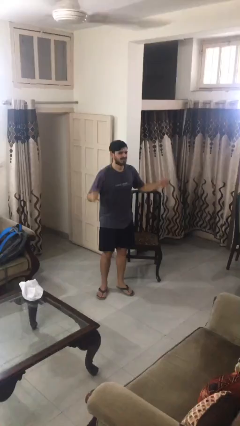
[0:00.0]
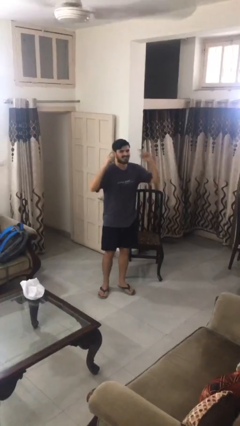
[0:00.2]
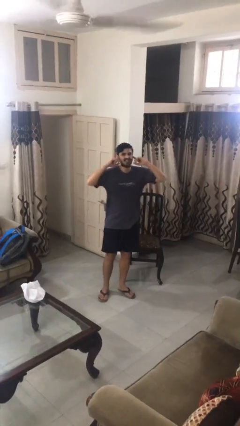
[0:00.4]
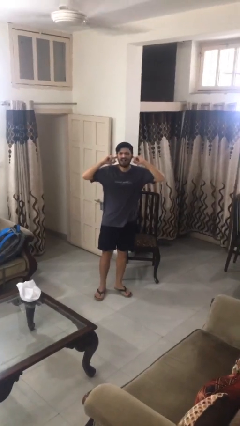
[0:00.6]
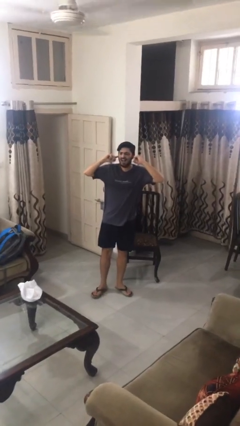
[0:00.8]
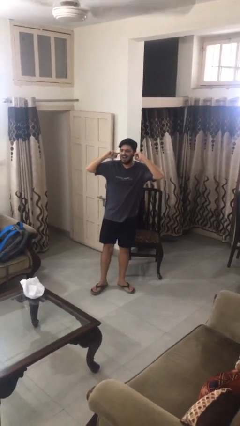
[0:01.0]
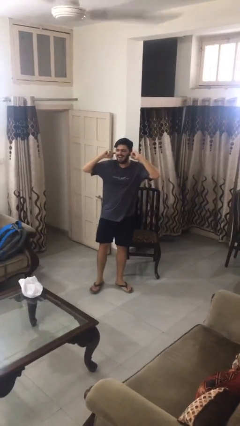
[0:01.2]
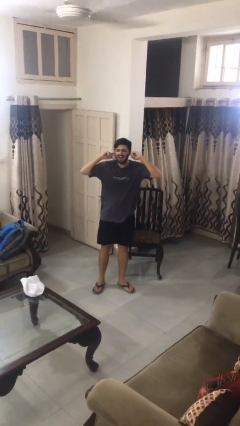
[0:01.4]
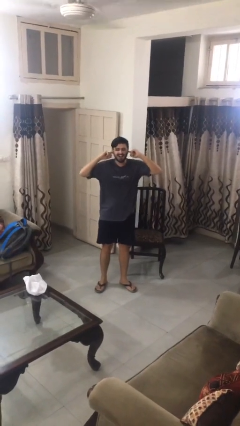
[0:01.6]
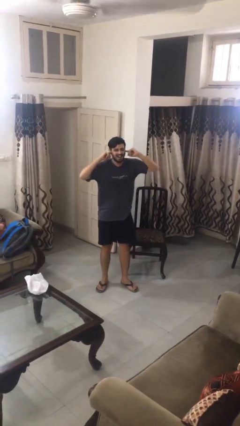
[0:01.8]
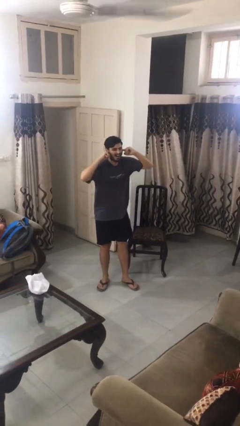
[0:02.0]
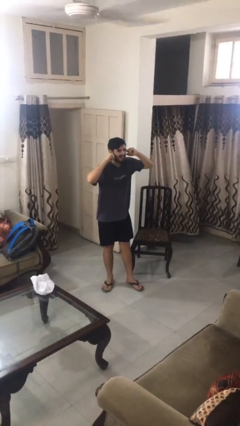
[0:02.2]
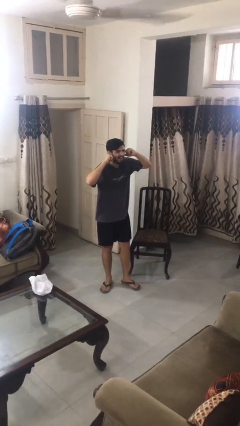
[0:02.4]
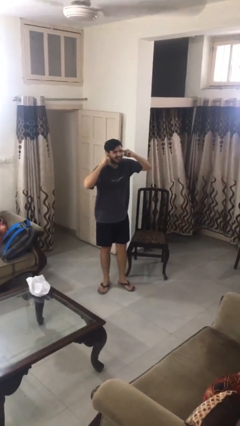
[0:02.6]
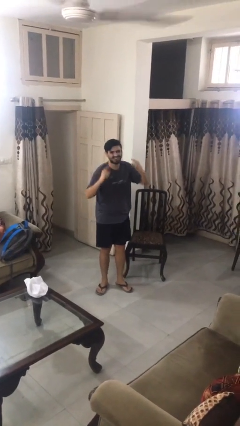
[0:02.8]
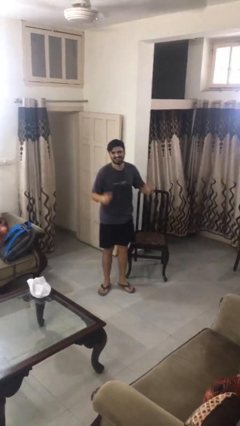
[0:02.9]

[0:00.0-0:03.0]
person puts fingers in ear

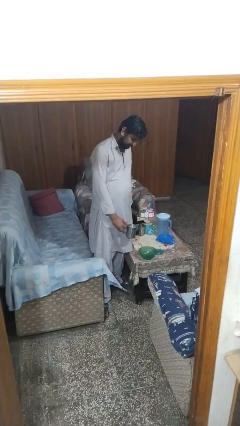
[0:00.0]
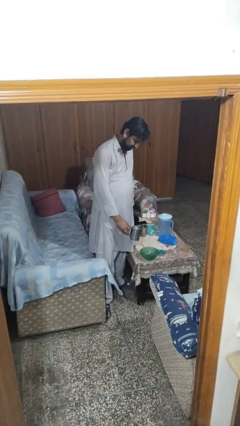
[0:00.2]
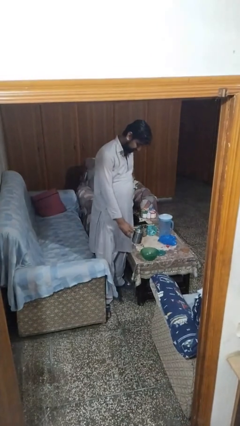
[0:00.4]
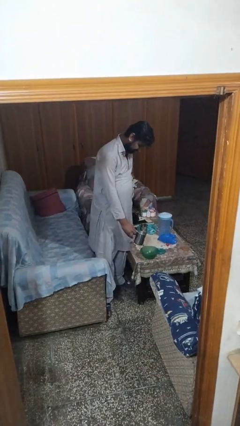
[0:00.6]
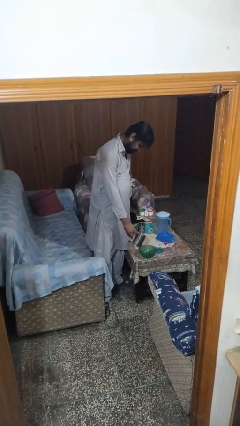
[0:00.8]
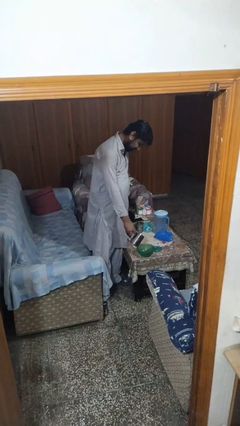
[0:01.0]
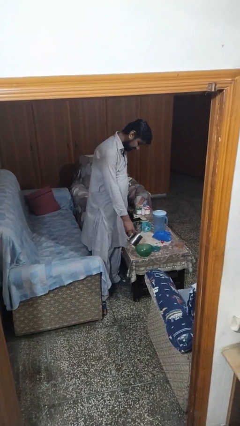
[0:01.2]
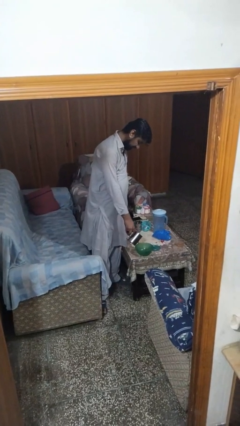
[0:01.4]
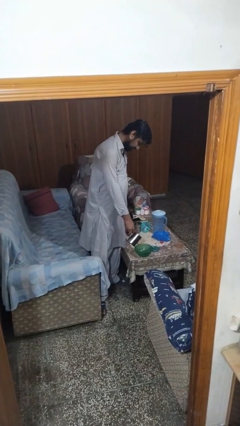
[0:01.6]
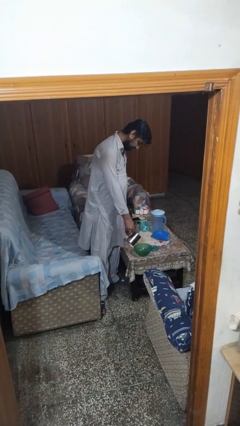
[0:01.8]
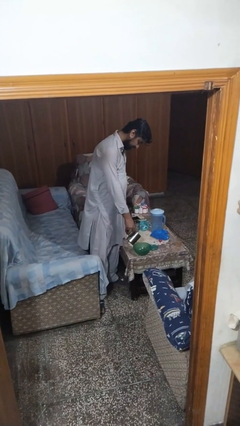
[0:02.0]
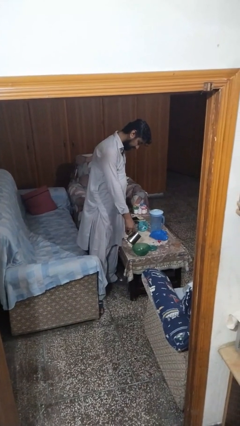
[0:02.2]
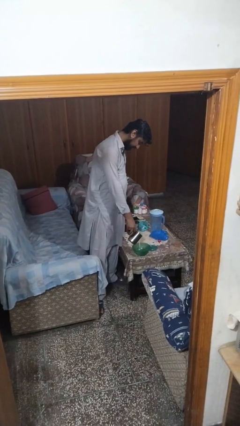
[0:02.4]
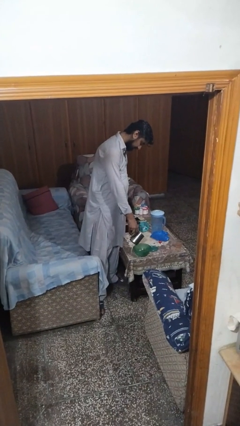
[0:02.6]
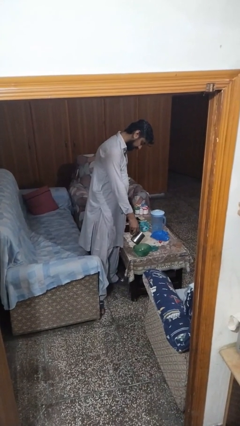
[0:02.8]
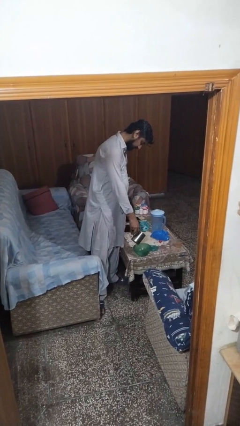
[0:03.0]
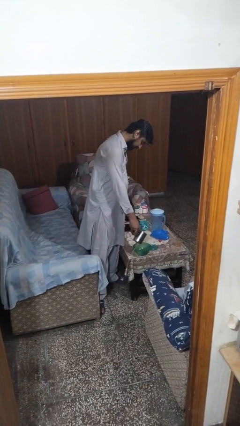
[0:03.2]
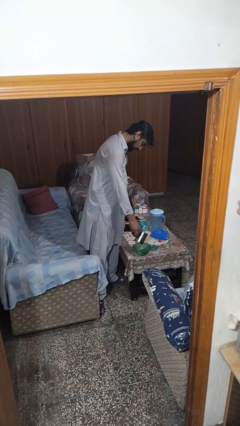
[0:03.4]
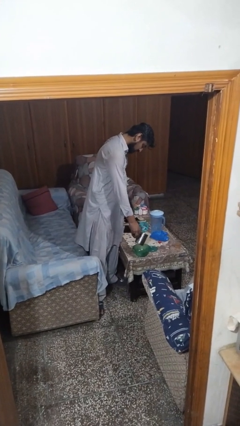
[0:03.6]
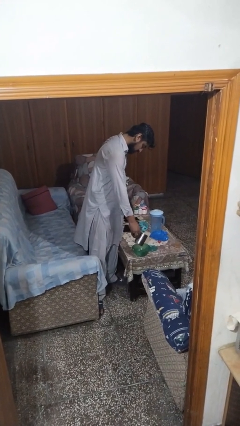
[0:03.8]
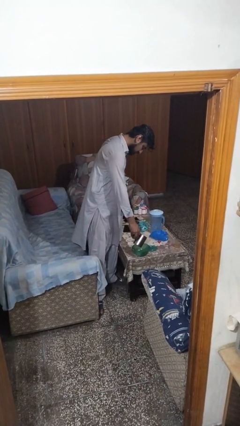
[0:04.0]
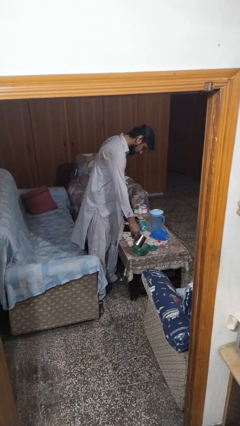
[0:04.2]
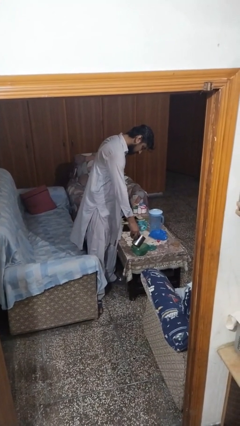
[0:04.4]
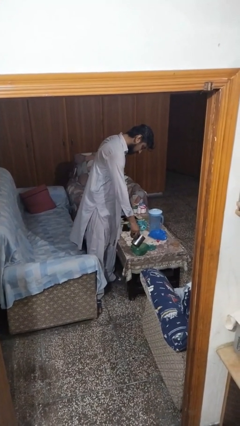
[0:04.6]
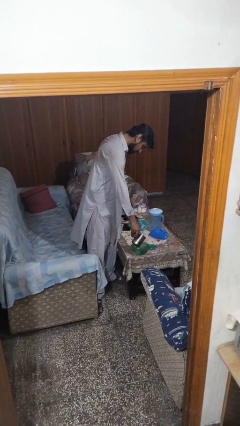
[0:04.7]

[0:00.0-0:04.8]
person pours into bowl

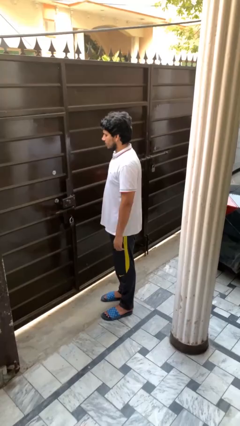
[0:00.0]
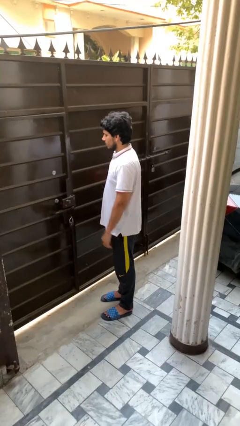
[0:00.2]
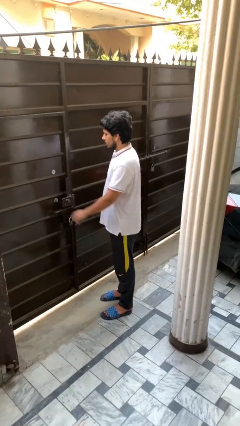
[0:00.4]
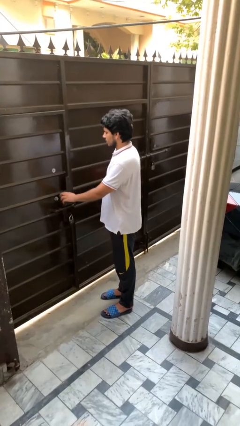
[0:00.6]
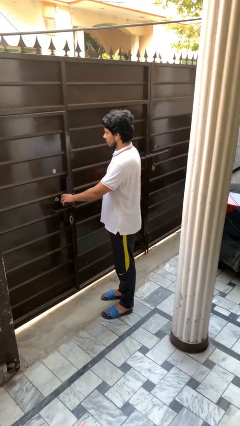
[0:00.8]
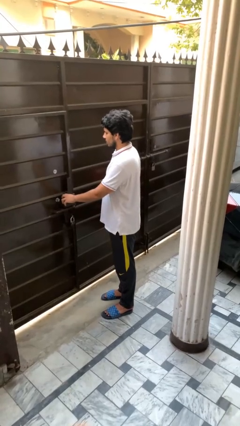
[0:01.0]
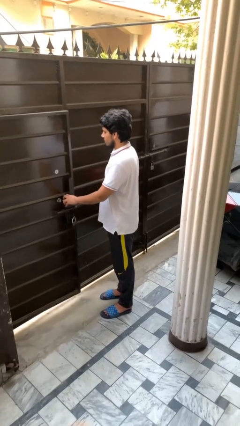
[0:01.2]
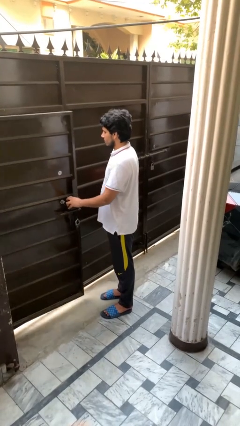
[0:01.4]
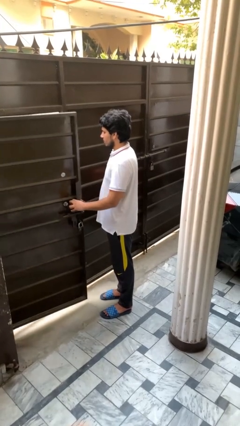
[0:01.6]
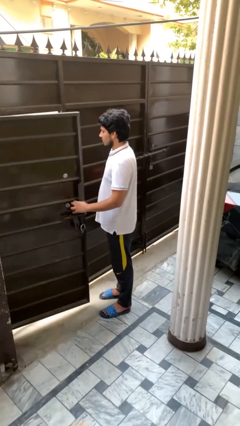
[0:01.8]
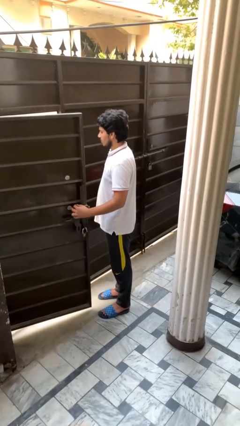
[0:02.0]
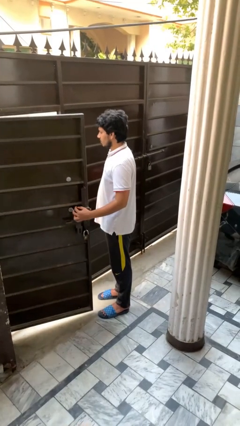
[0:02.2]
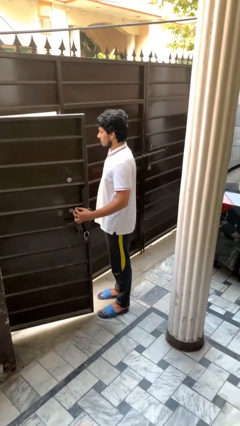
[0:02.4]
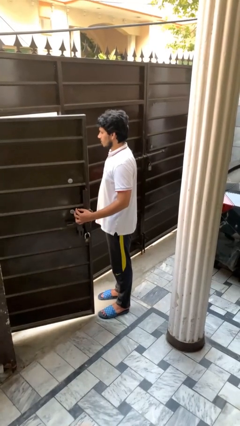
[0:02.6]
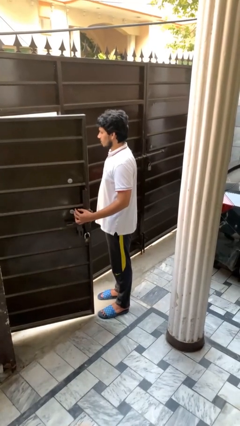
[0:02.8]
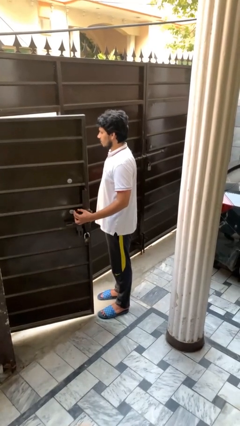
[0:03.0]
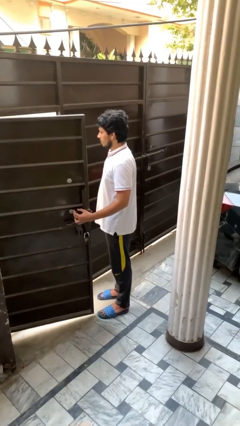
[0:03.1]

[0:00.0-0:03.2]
person opens gate

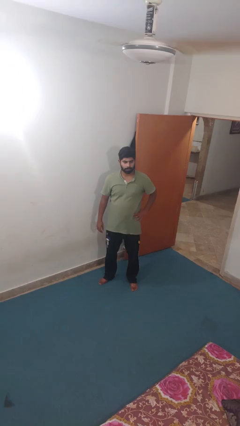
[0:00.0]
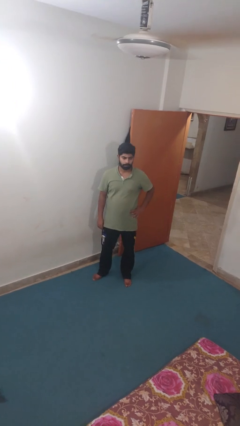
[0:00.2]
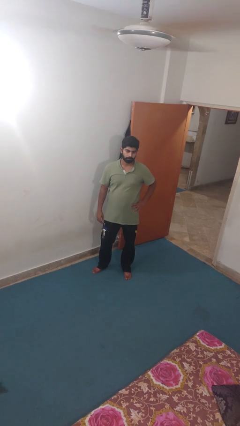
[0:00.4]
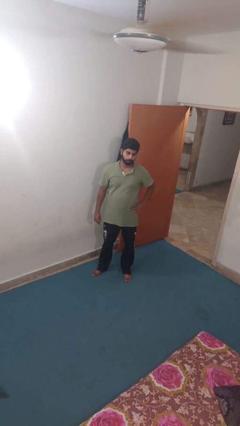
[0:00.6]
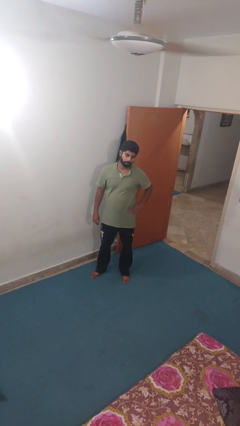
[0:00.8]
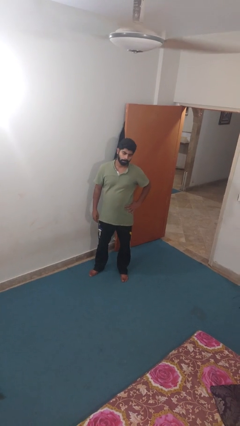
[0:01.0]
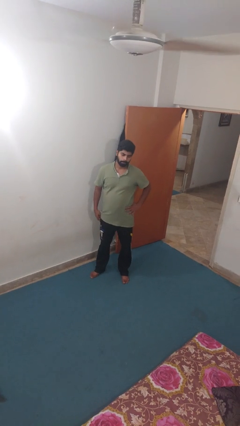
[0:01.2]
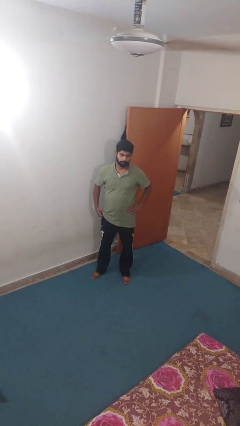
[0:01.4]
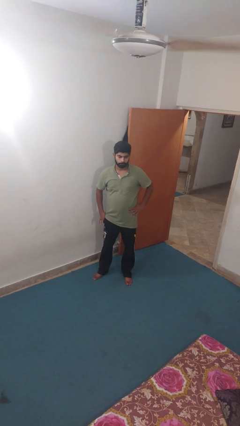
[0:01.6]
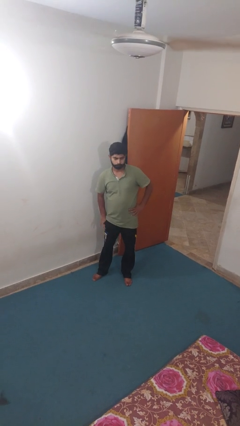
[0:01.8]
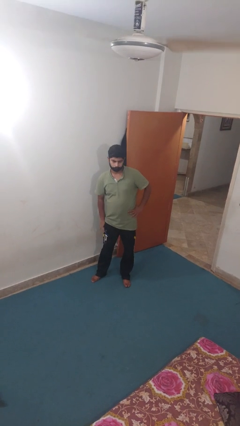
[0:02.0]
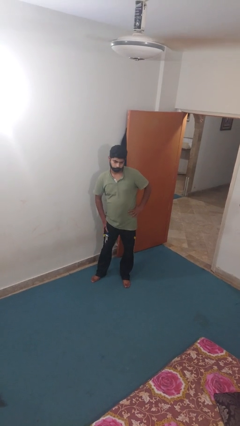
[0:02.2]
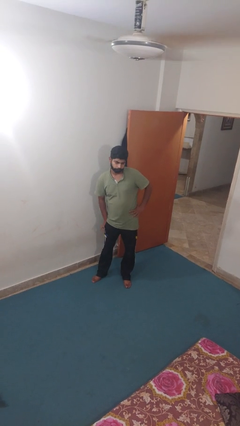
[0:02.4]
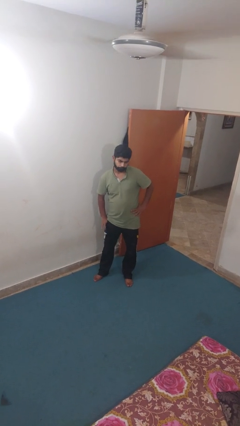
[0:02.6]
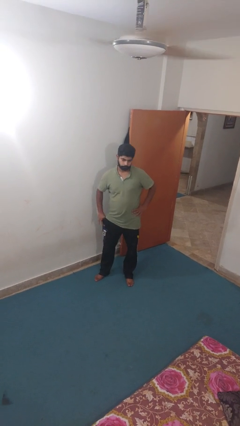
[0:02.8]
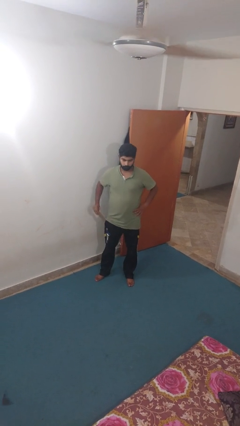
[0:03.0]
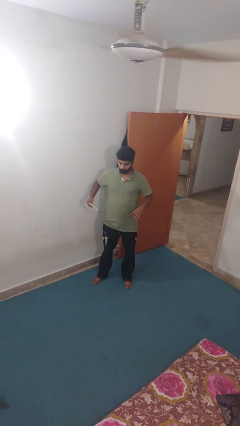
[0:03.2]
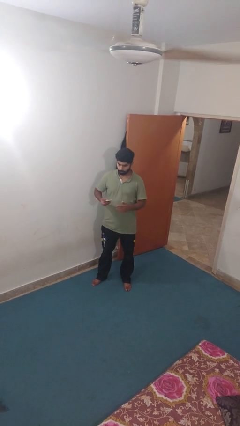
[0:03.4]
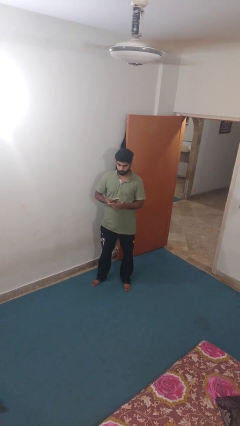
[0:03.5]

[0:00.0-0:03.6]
person takes phone from pocket

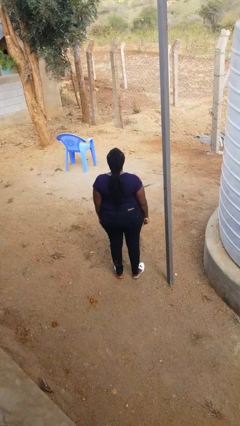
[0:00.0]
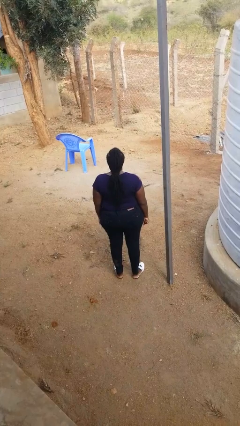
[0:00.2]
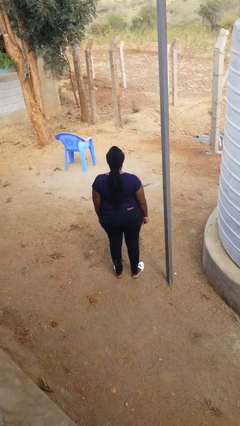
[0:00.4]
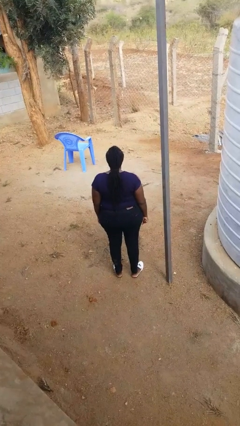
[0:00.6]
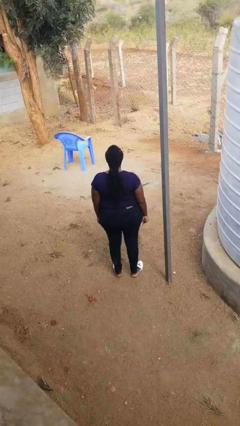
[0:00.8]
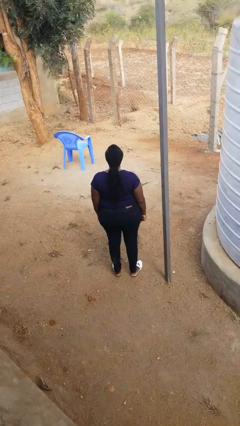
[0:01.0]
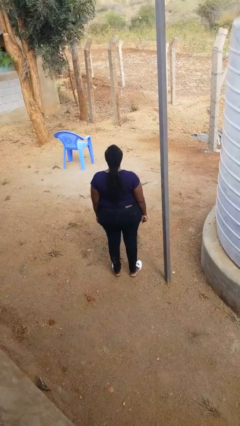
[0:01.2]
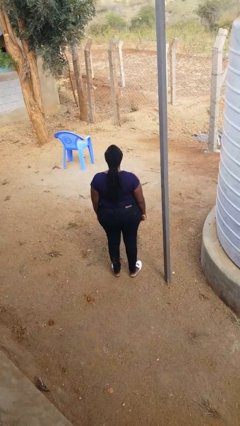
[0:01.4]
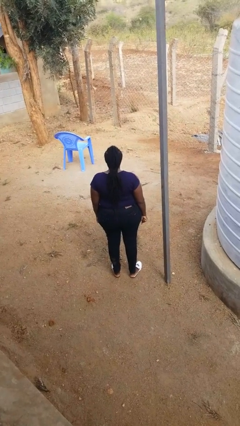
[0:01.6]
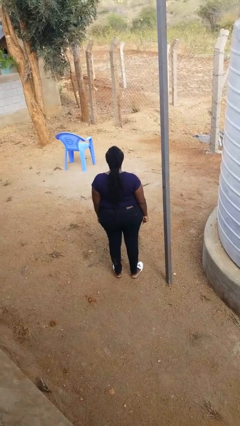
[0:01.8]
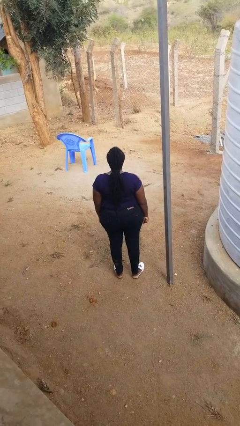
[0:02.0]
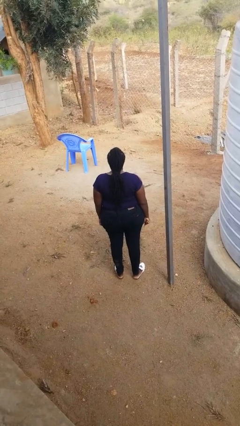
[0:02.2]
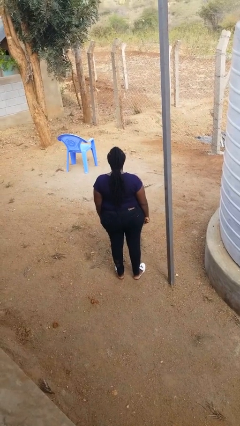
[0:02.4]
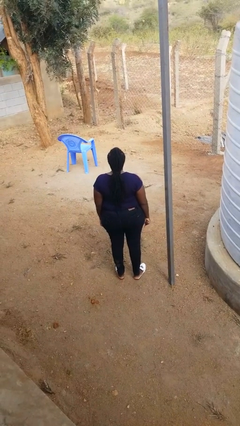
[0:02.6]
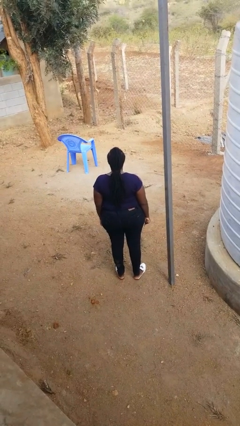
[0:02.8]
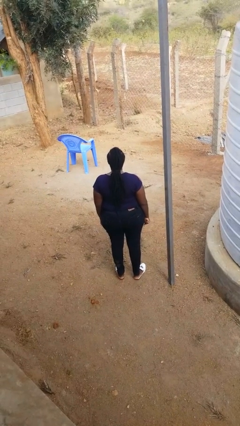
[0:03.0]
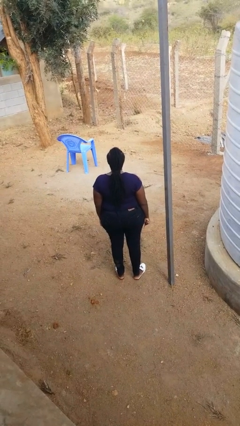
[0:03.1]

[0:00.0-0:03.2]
person nods head
